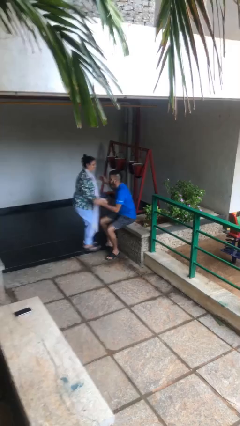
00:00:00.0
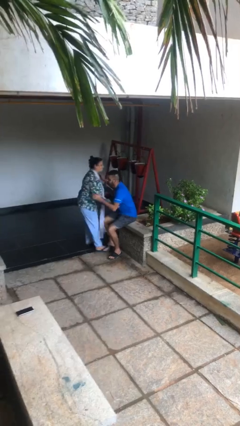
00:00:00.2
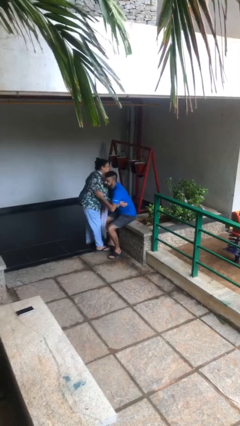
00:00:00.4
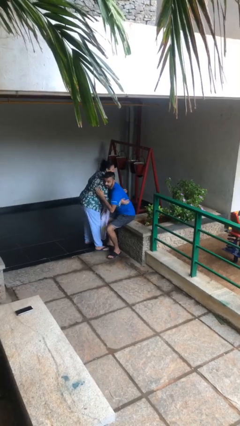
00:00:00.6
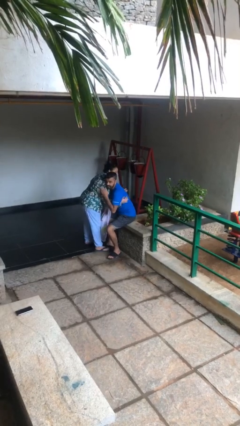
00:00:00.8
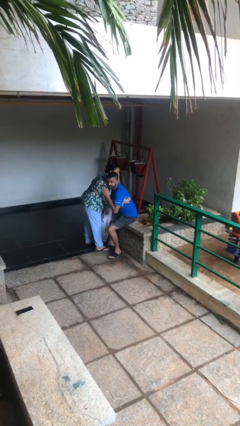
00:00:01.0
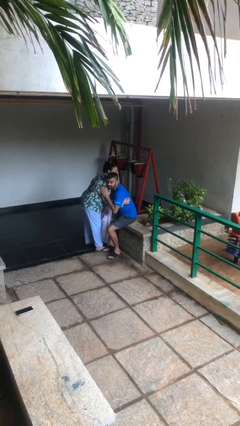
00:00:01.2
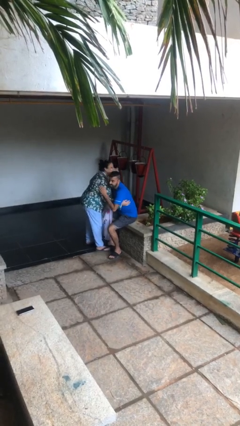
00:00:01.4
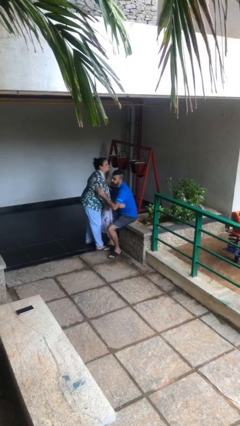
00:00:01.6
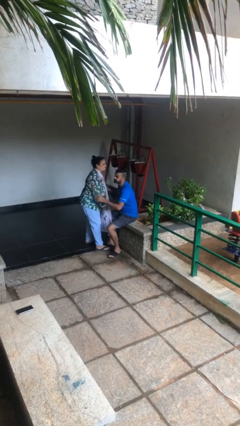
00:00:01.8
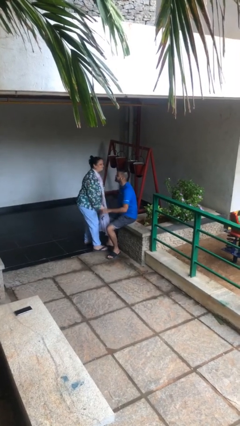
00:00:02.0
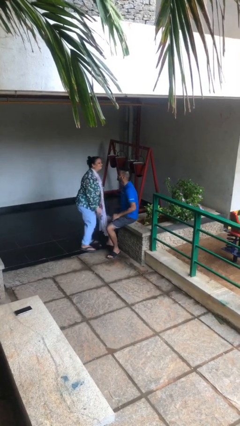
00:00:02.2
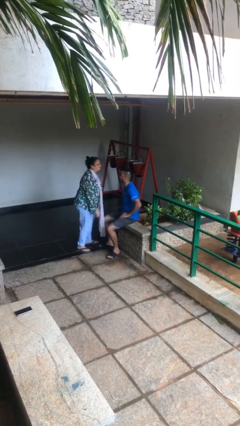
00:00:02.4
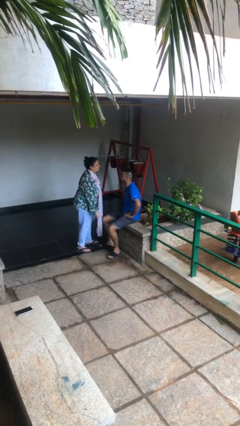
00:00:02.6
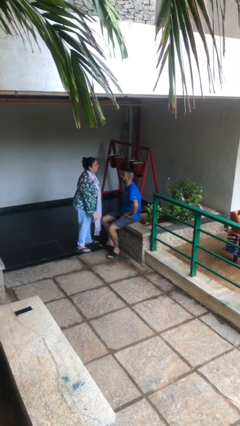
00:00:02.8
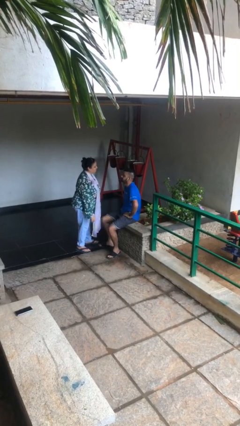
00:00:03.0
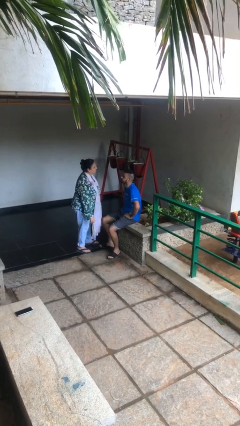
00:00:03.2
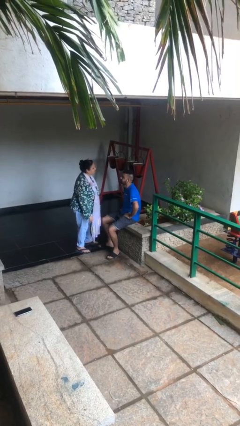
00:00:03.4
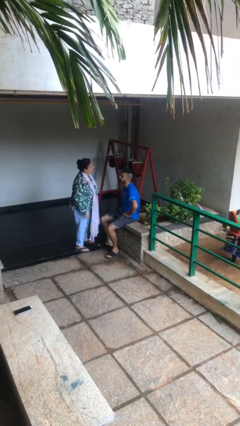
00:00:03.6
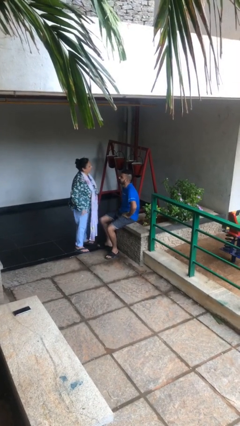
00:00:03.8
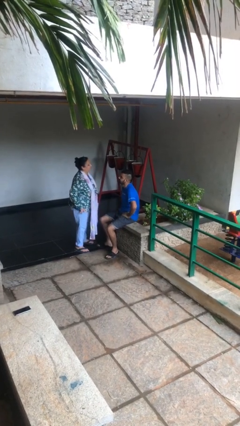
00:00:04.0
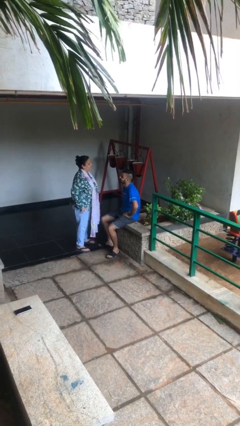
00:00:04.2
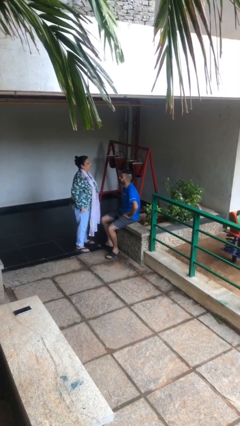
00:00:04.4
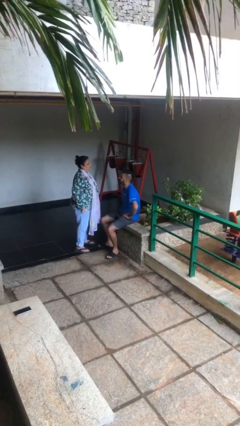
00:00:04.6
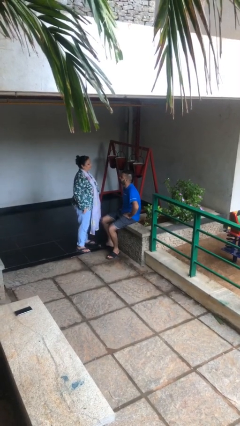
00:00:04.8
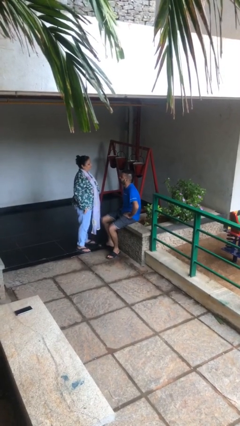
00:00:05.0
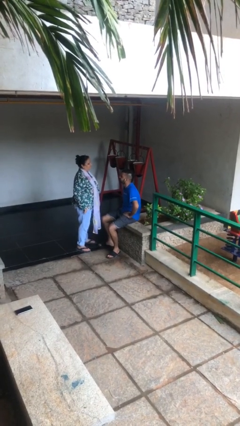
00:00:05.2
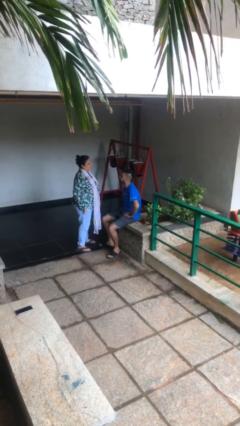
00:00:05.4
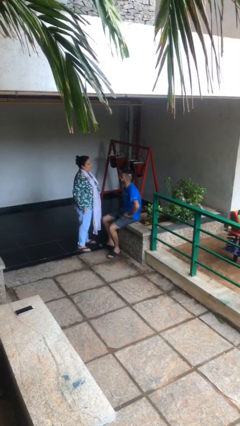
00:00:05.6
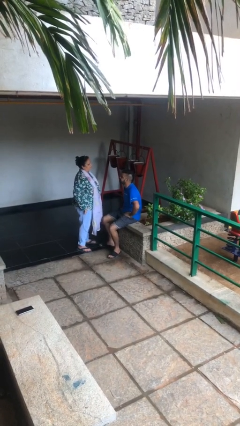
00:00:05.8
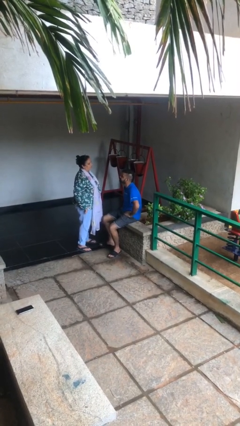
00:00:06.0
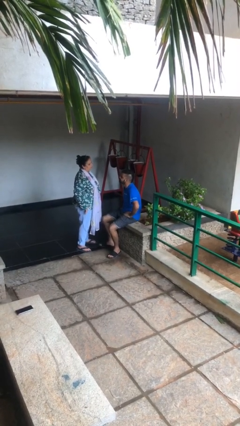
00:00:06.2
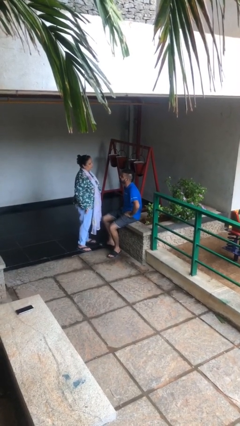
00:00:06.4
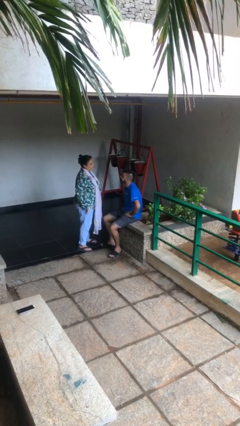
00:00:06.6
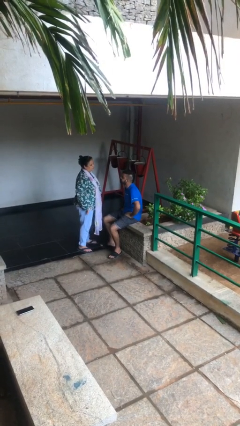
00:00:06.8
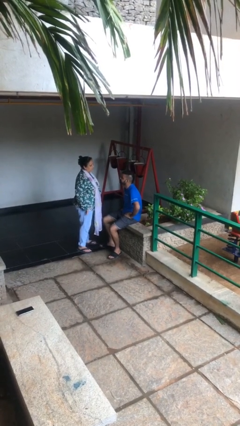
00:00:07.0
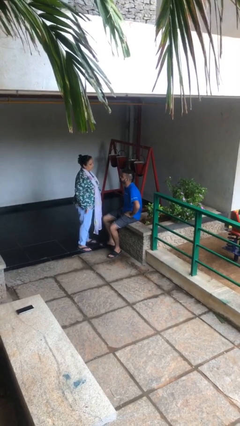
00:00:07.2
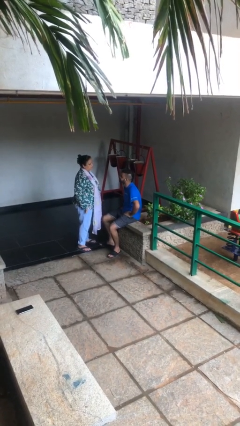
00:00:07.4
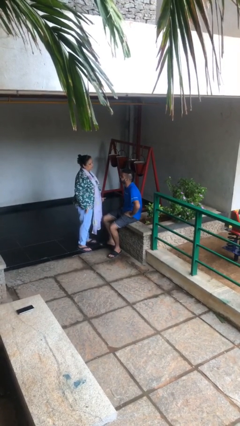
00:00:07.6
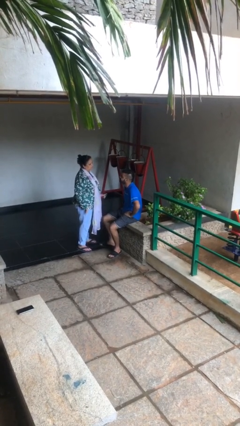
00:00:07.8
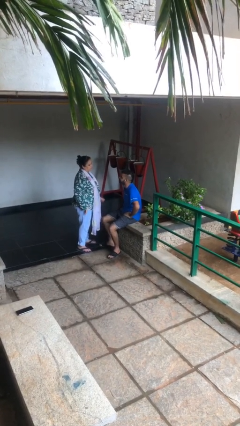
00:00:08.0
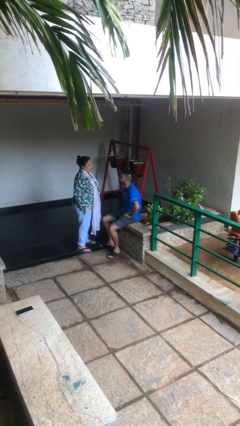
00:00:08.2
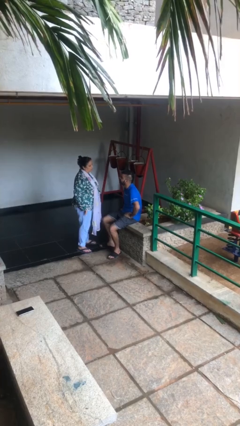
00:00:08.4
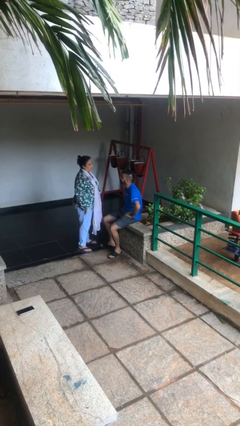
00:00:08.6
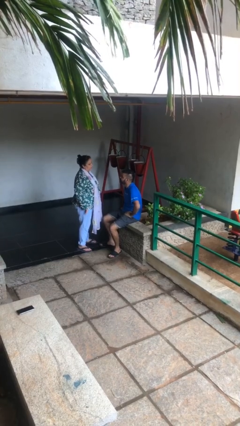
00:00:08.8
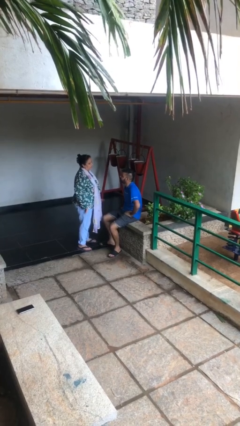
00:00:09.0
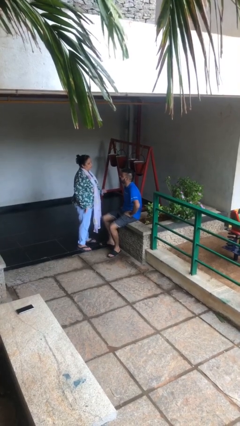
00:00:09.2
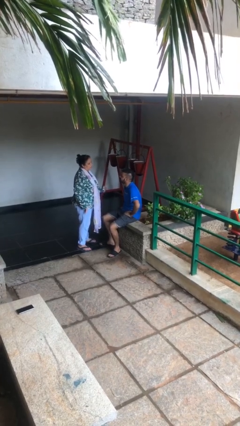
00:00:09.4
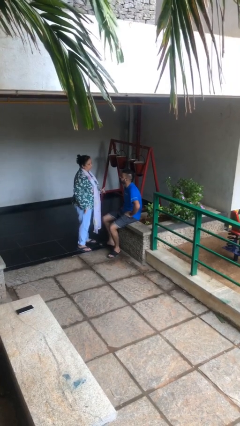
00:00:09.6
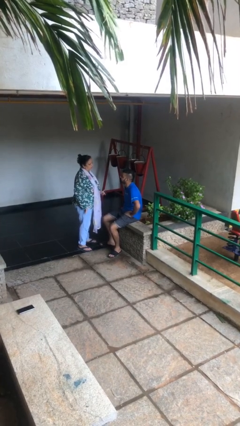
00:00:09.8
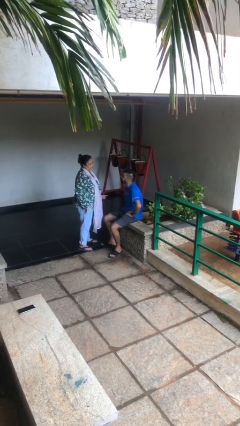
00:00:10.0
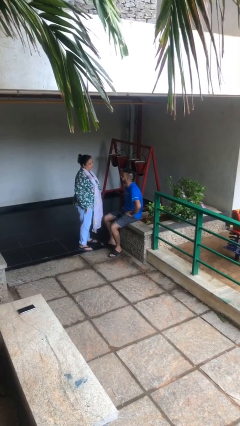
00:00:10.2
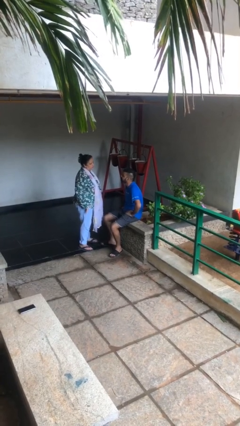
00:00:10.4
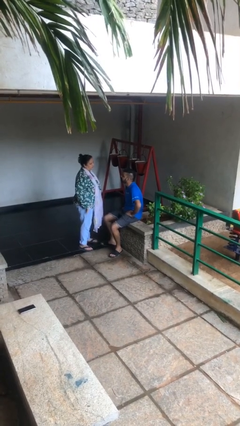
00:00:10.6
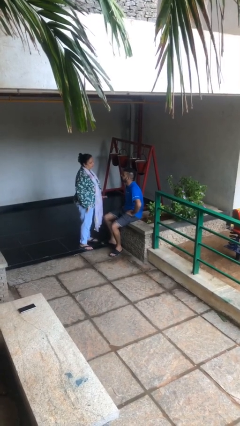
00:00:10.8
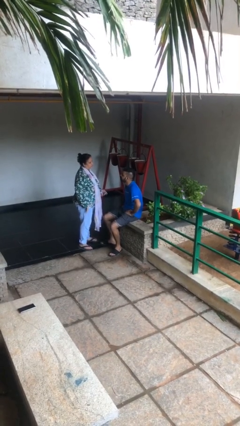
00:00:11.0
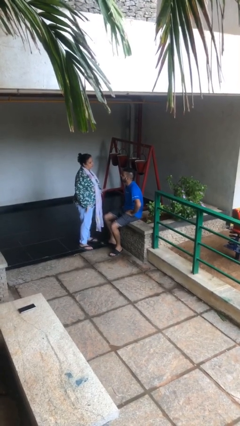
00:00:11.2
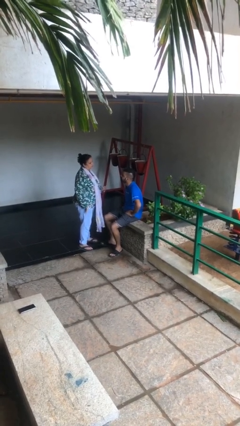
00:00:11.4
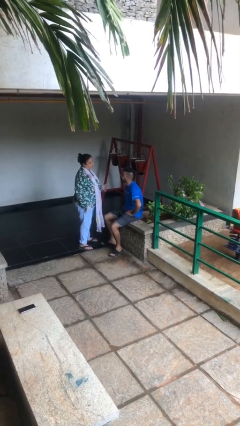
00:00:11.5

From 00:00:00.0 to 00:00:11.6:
person embraces person

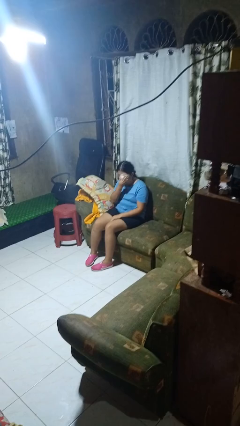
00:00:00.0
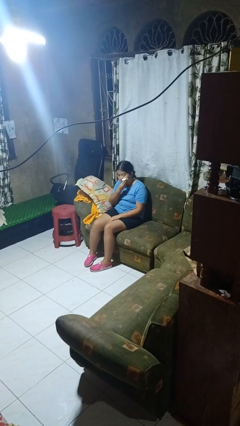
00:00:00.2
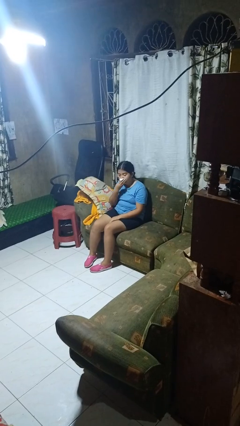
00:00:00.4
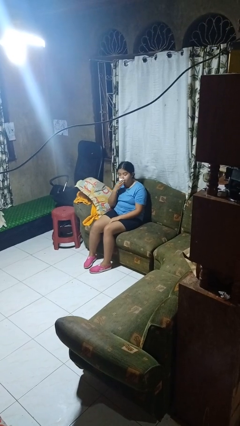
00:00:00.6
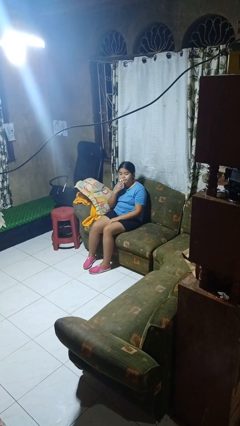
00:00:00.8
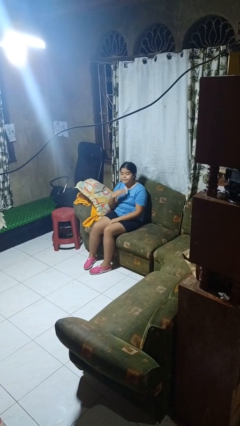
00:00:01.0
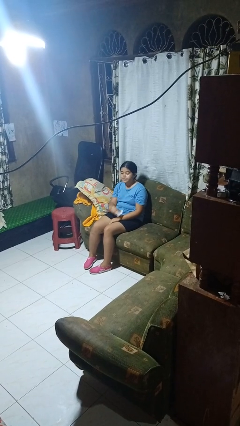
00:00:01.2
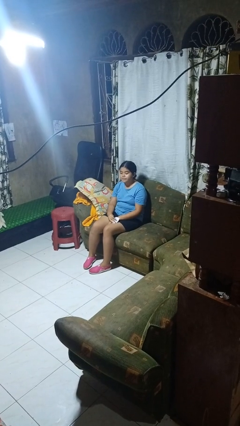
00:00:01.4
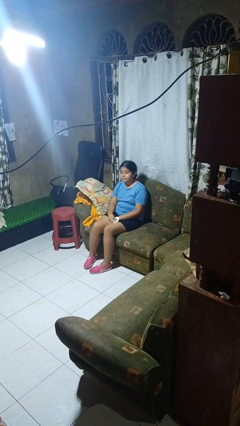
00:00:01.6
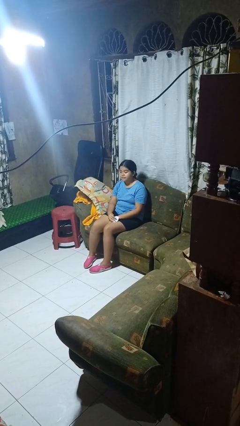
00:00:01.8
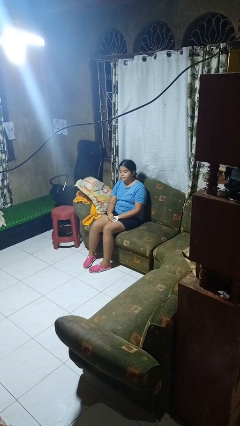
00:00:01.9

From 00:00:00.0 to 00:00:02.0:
person wipes mouth with napkin

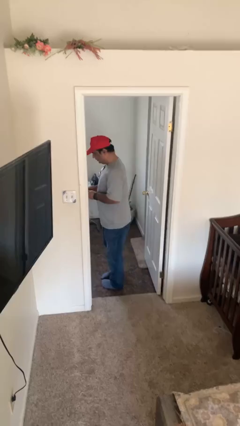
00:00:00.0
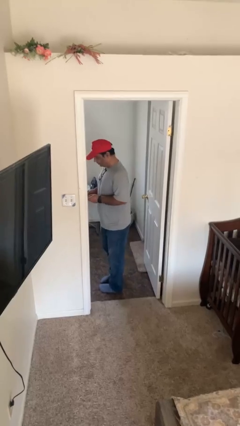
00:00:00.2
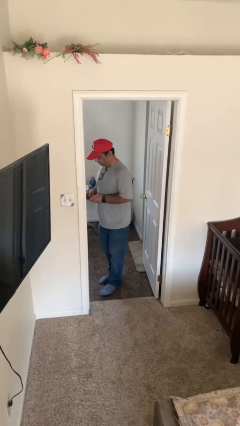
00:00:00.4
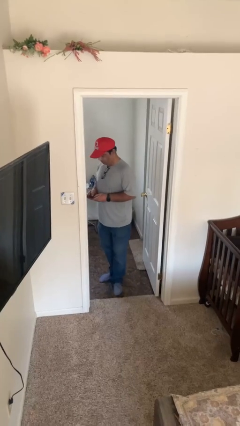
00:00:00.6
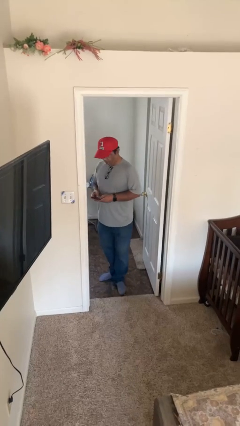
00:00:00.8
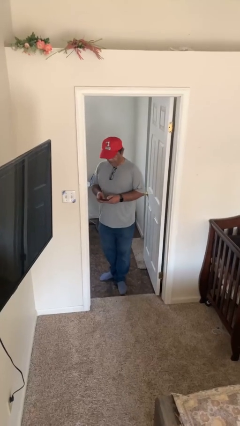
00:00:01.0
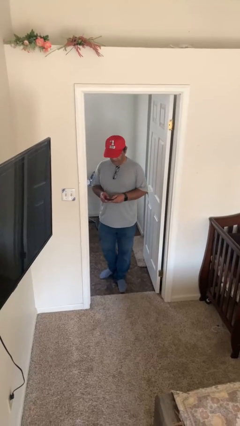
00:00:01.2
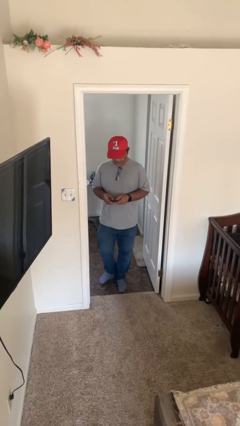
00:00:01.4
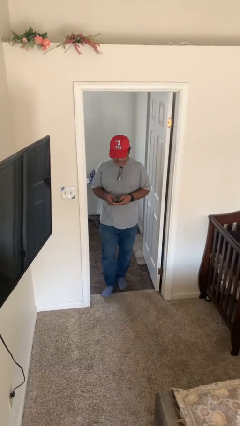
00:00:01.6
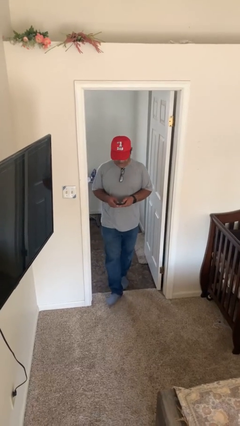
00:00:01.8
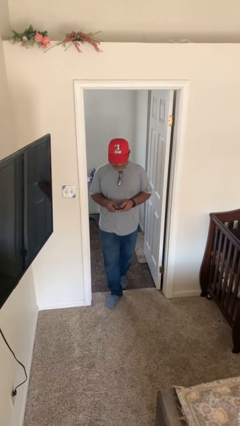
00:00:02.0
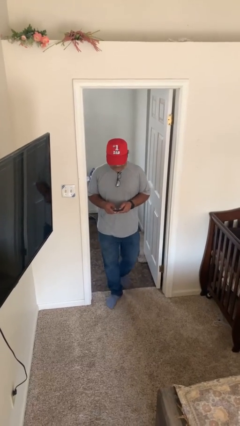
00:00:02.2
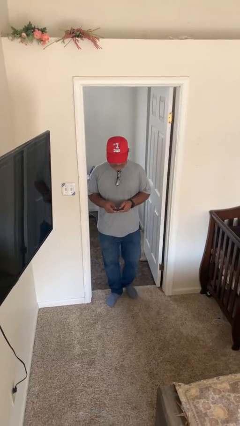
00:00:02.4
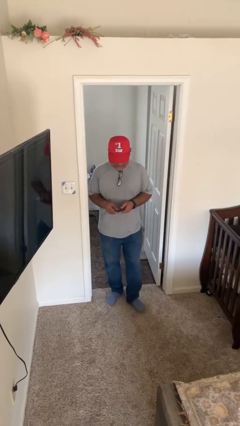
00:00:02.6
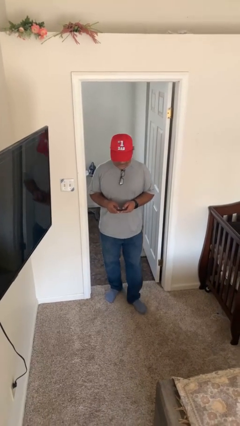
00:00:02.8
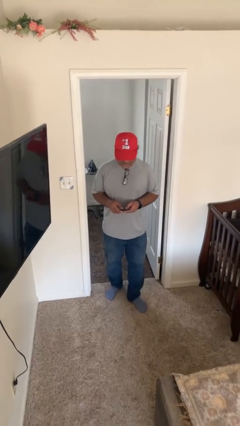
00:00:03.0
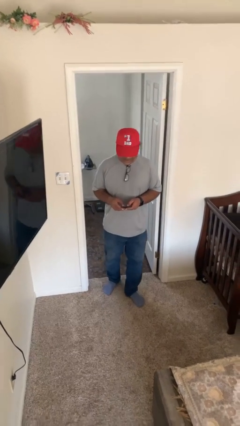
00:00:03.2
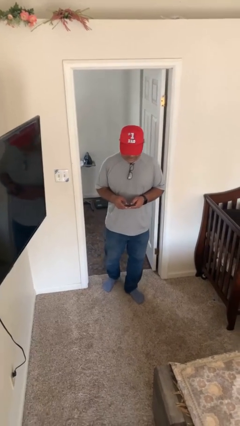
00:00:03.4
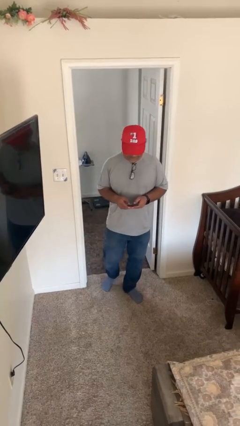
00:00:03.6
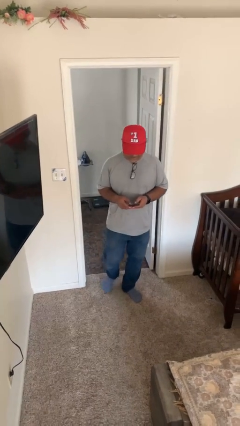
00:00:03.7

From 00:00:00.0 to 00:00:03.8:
person enters scene through structure

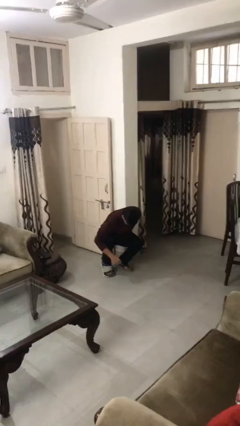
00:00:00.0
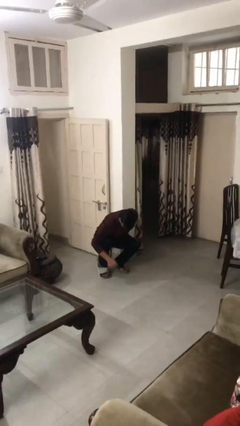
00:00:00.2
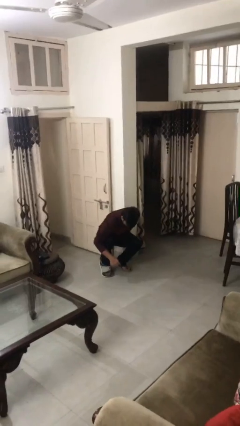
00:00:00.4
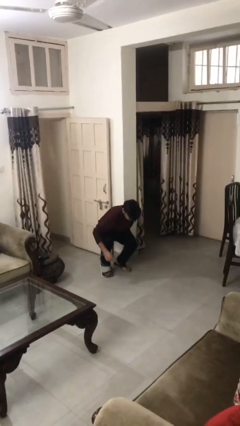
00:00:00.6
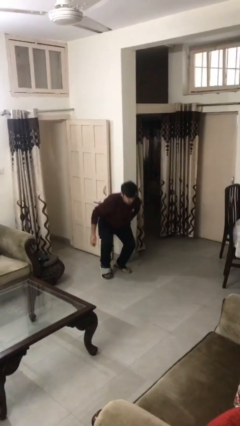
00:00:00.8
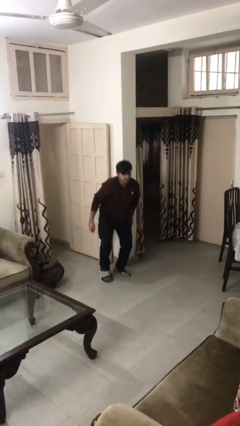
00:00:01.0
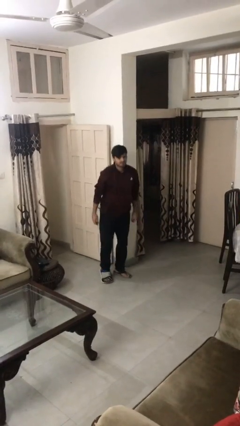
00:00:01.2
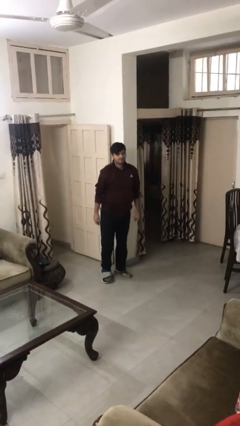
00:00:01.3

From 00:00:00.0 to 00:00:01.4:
person stands up
